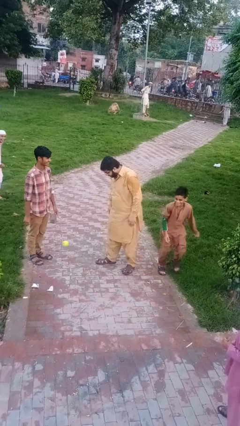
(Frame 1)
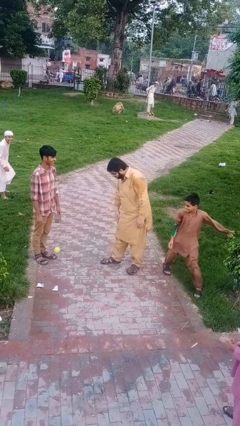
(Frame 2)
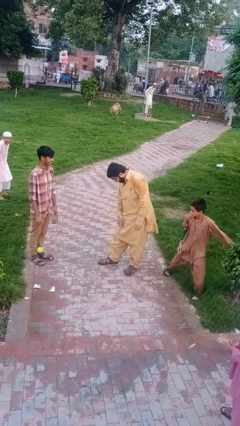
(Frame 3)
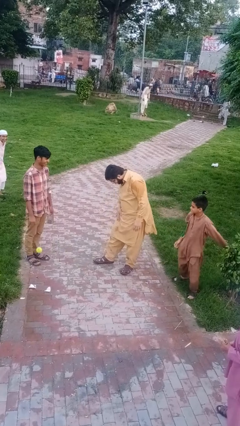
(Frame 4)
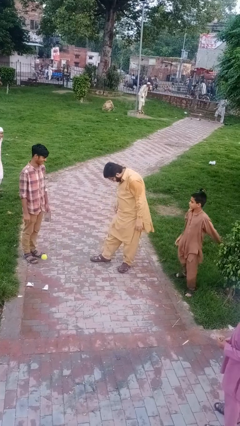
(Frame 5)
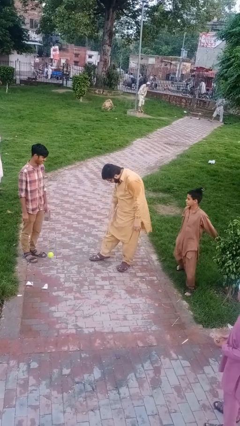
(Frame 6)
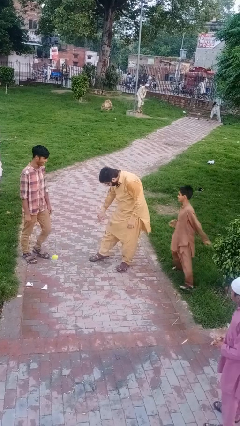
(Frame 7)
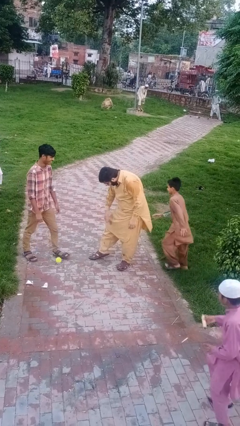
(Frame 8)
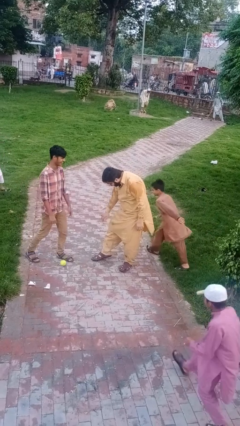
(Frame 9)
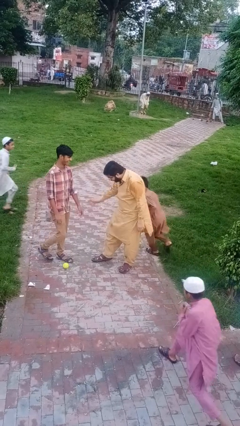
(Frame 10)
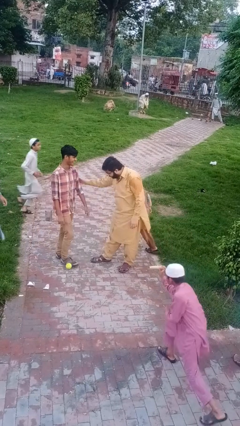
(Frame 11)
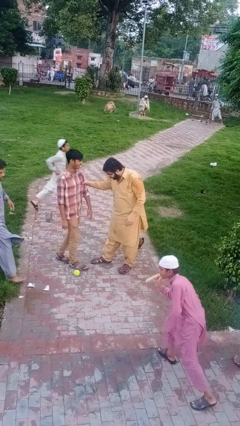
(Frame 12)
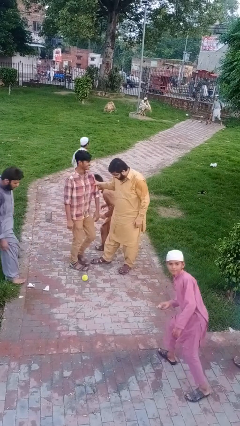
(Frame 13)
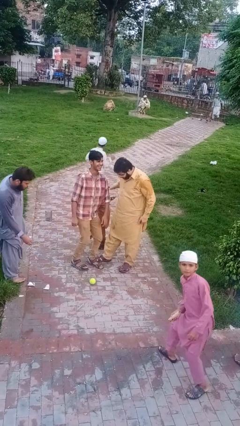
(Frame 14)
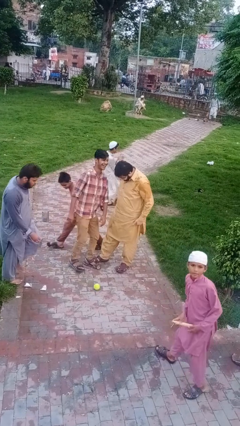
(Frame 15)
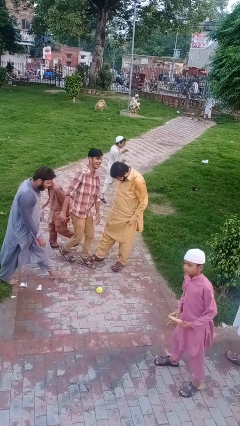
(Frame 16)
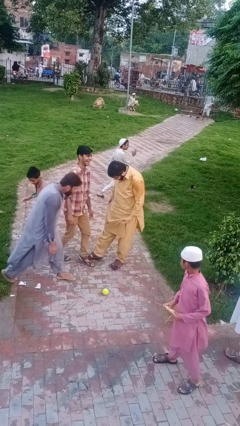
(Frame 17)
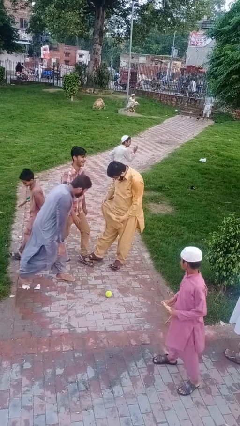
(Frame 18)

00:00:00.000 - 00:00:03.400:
person grabs person by bicep

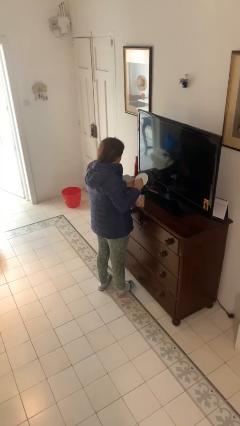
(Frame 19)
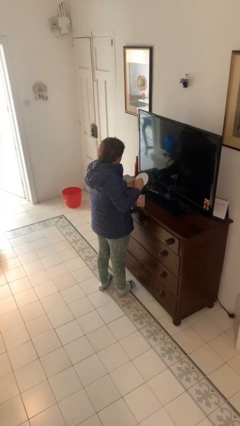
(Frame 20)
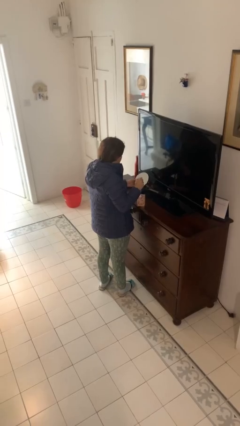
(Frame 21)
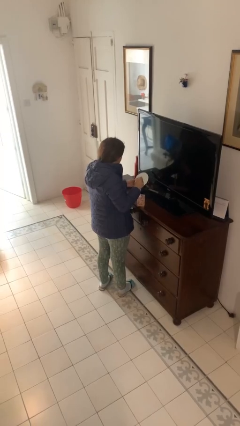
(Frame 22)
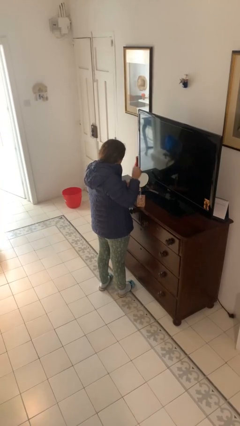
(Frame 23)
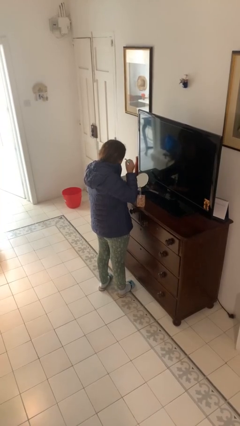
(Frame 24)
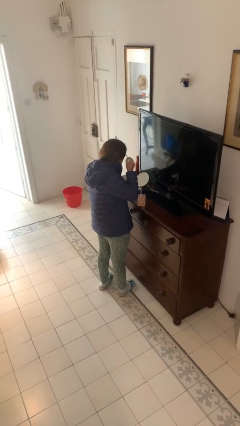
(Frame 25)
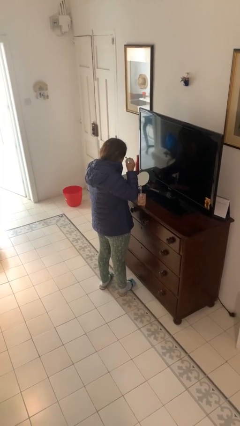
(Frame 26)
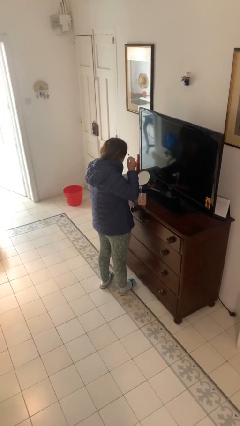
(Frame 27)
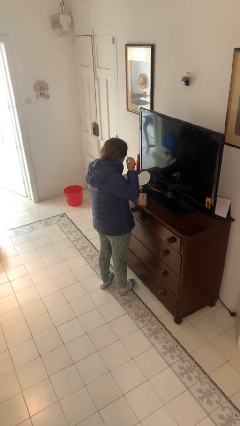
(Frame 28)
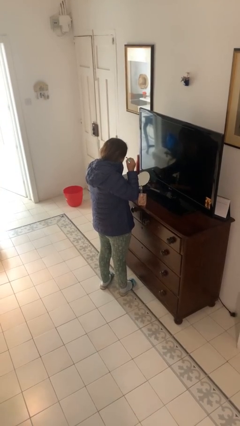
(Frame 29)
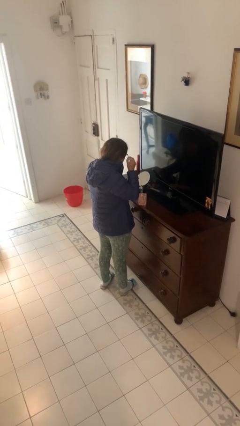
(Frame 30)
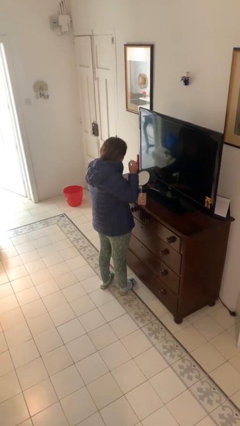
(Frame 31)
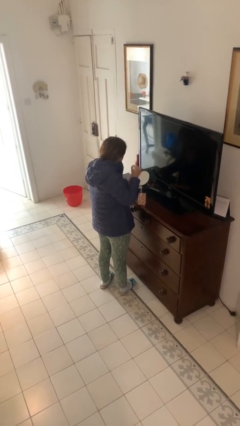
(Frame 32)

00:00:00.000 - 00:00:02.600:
person applies eye makeup

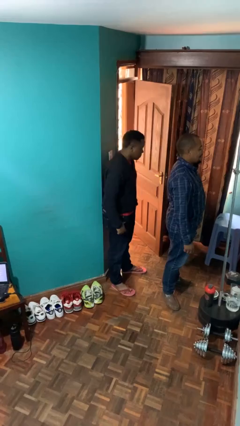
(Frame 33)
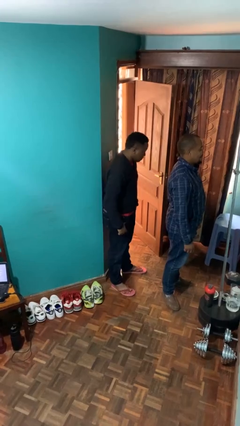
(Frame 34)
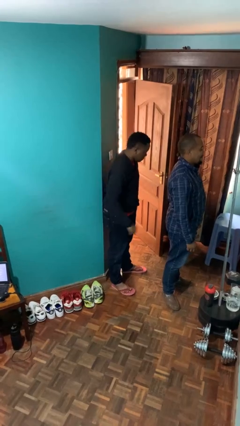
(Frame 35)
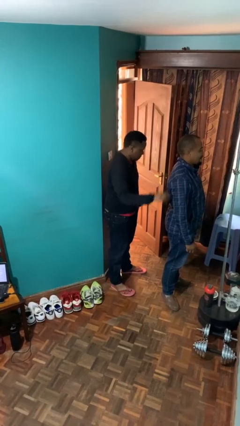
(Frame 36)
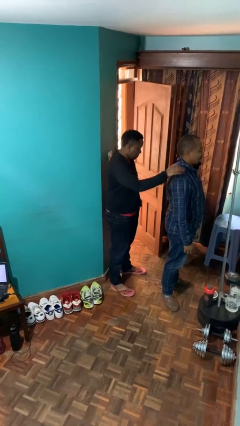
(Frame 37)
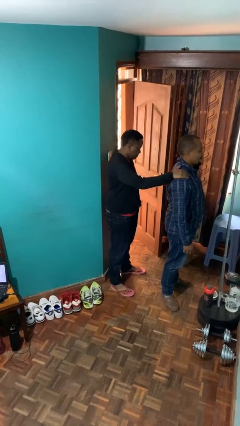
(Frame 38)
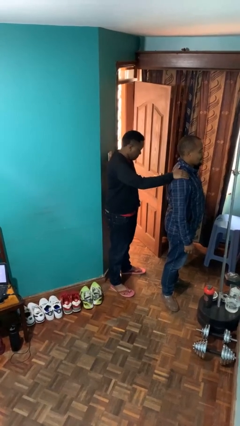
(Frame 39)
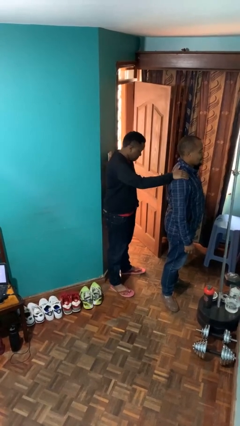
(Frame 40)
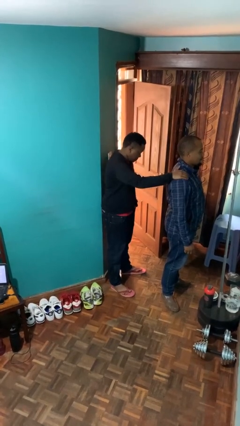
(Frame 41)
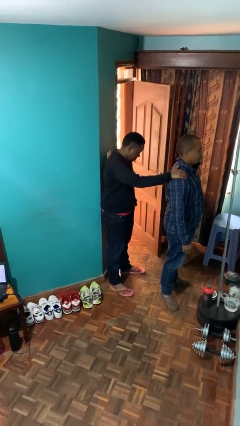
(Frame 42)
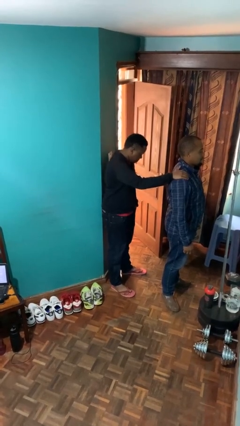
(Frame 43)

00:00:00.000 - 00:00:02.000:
person grabs person by shoulder

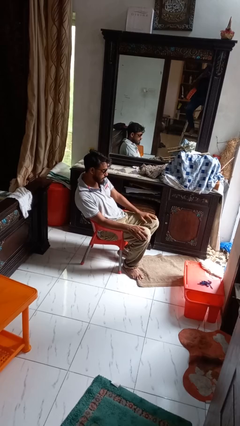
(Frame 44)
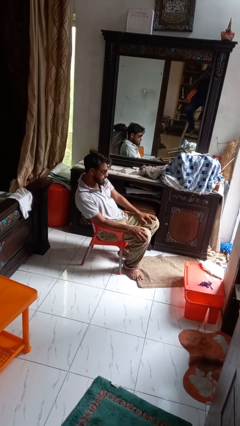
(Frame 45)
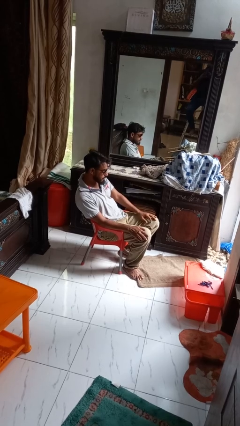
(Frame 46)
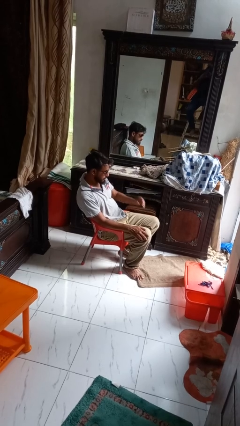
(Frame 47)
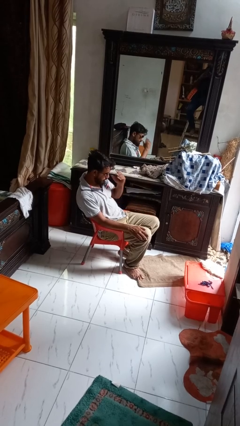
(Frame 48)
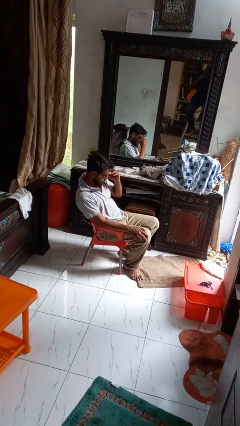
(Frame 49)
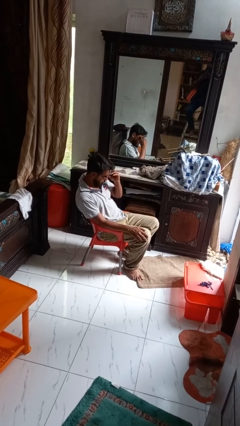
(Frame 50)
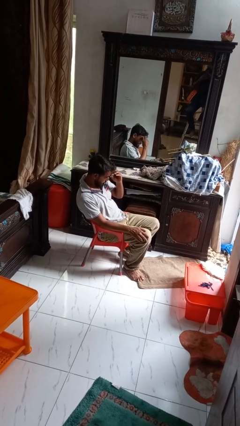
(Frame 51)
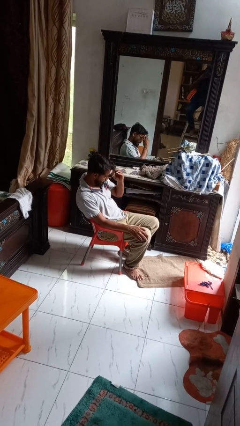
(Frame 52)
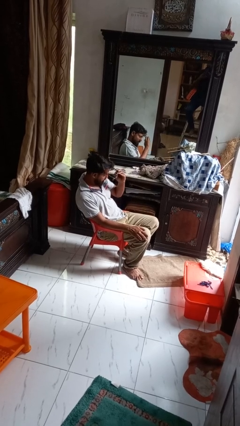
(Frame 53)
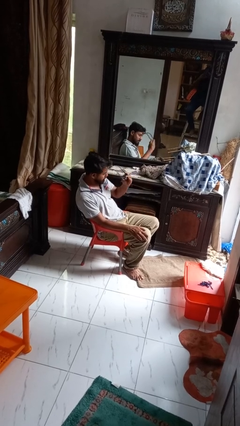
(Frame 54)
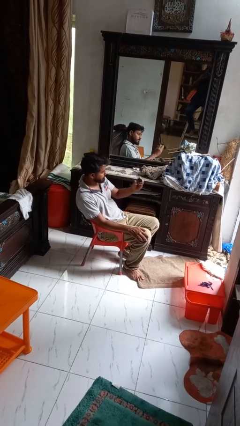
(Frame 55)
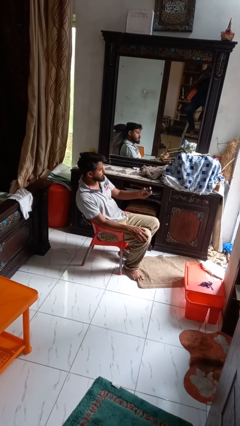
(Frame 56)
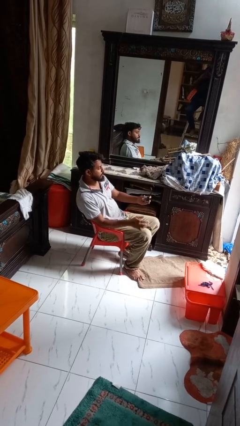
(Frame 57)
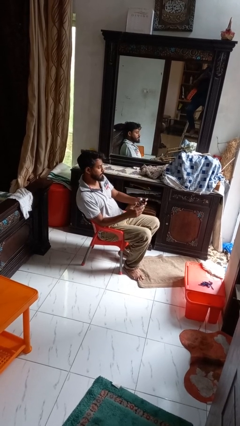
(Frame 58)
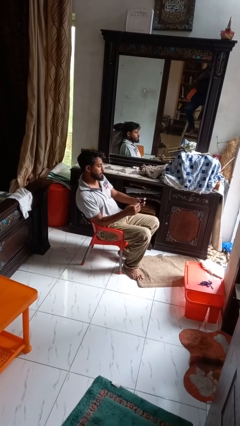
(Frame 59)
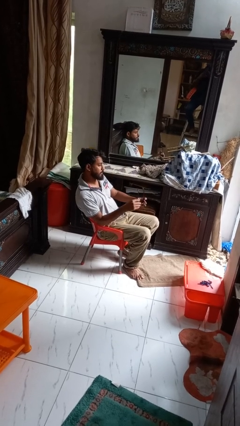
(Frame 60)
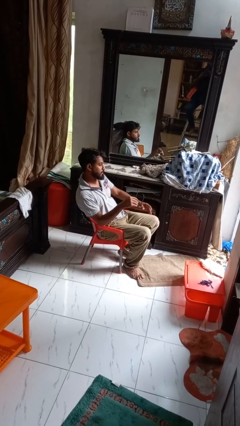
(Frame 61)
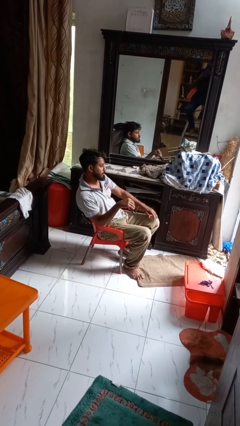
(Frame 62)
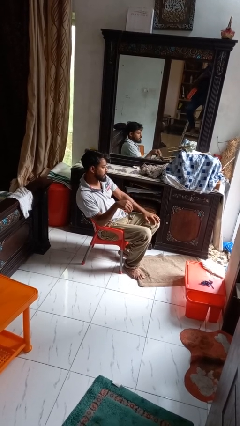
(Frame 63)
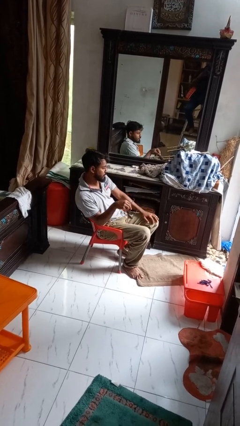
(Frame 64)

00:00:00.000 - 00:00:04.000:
person takes off sunglasses

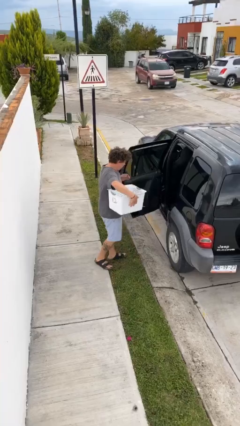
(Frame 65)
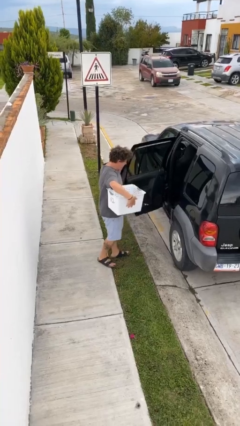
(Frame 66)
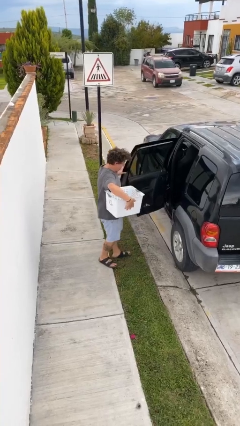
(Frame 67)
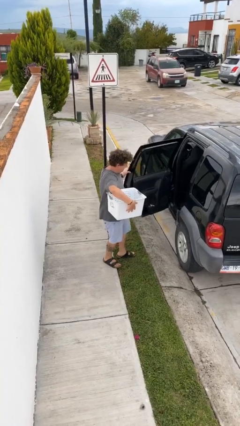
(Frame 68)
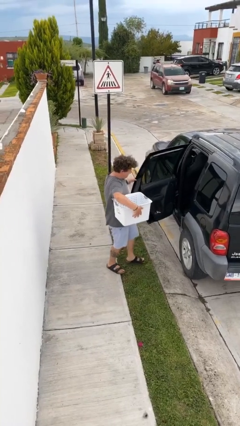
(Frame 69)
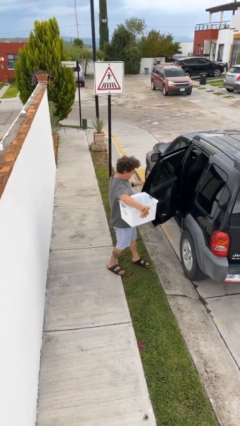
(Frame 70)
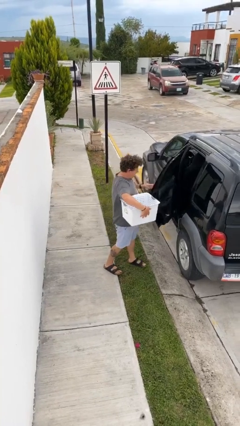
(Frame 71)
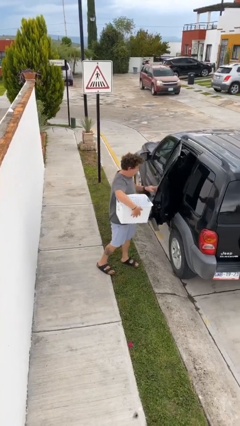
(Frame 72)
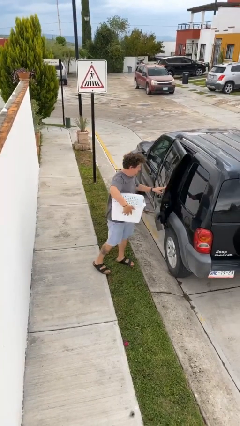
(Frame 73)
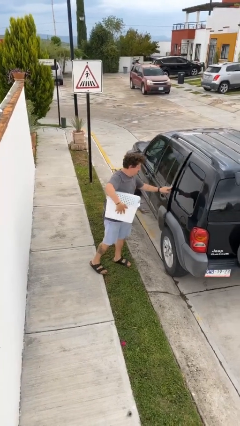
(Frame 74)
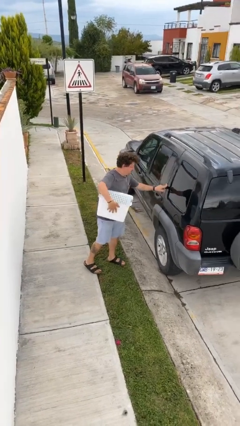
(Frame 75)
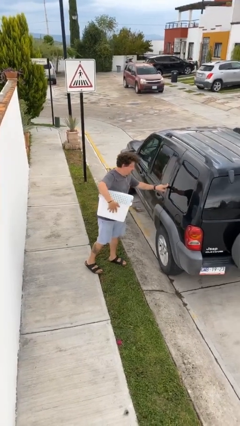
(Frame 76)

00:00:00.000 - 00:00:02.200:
person closes car door

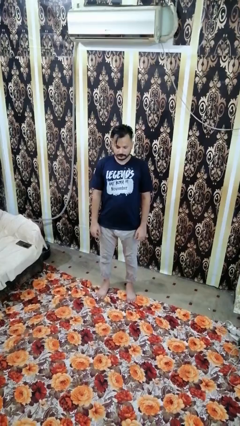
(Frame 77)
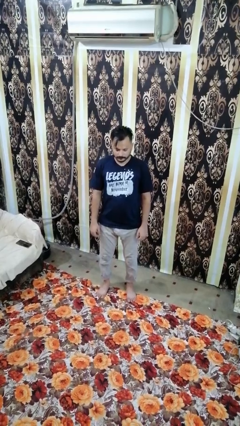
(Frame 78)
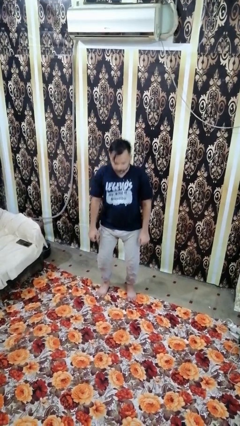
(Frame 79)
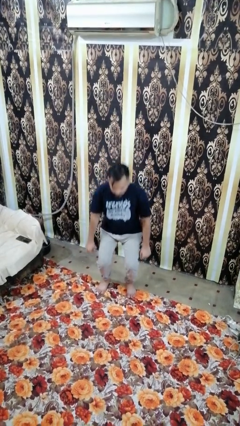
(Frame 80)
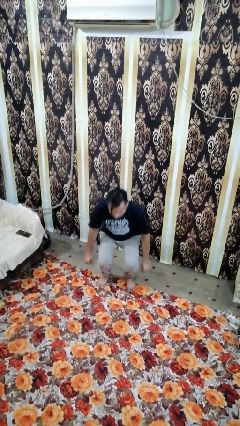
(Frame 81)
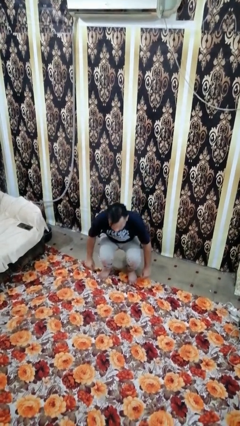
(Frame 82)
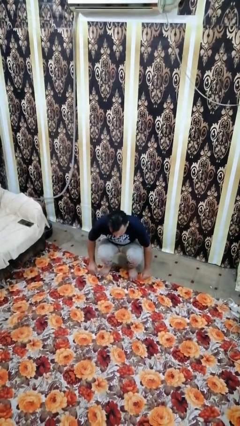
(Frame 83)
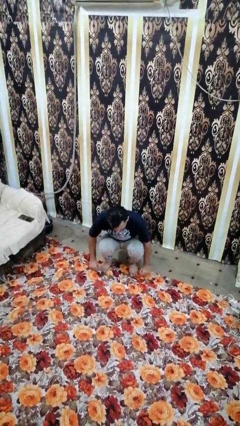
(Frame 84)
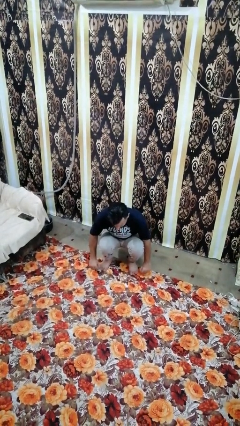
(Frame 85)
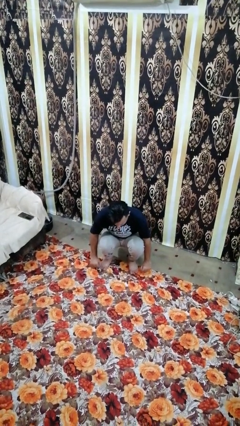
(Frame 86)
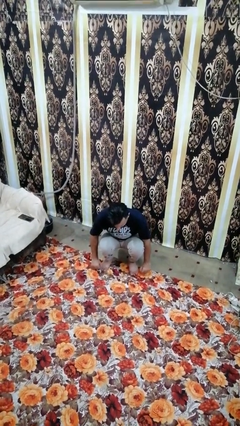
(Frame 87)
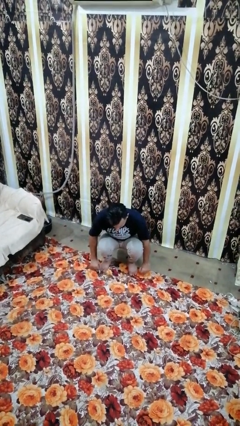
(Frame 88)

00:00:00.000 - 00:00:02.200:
person squats

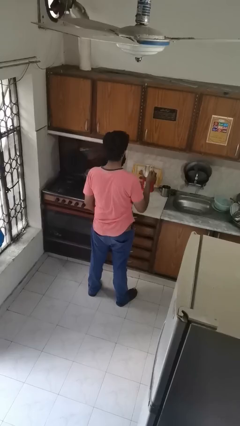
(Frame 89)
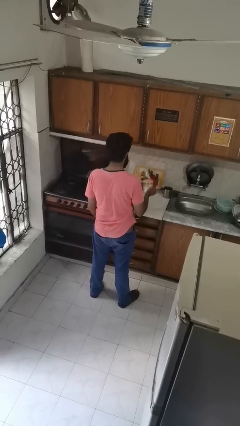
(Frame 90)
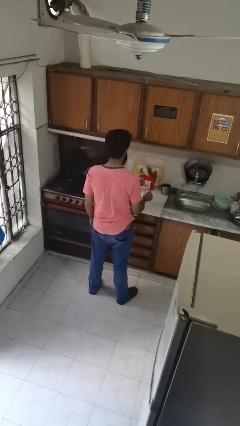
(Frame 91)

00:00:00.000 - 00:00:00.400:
person puts down object on shelf

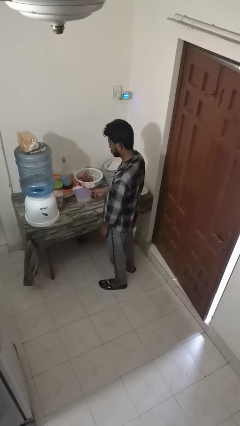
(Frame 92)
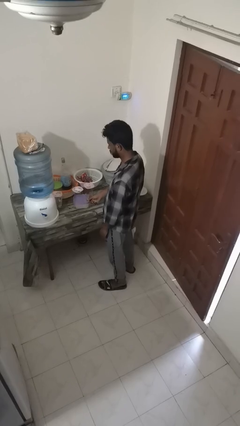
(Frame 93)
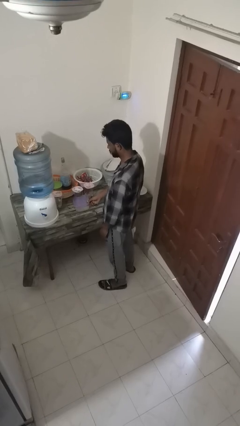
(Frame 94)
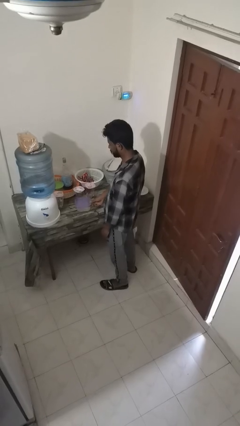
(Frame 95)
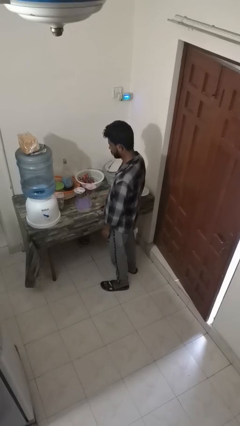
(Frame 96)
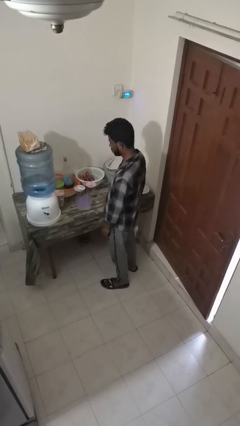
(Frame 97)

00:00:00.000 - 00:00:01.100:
person puts down object on countertop
